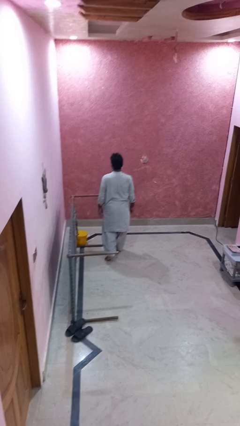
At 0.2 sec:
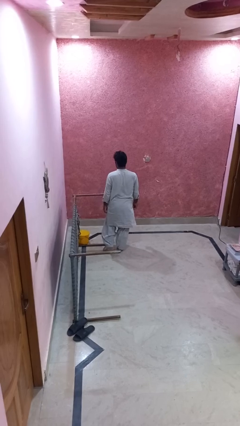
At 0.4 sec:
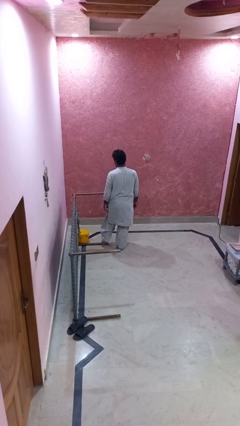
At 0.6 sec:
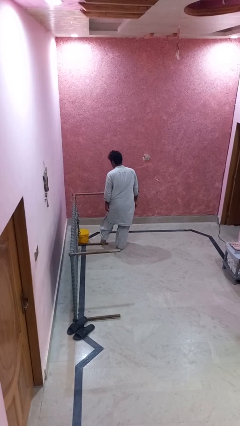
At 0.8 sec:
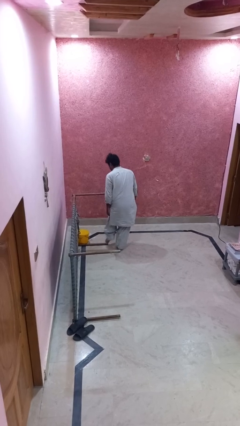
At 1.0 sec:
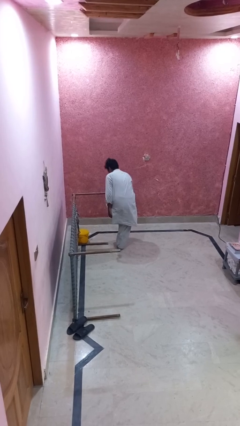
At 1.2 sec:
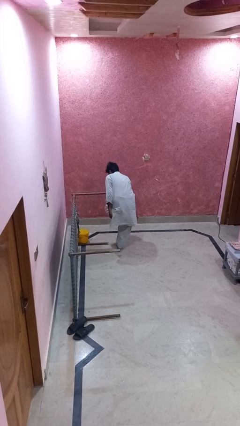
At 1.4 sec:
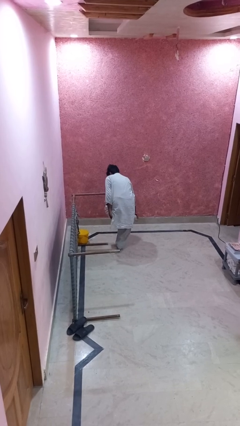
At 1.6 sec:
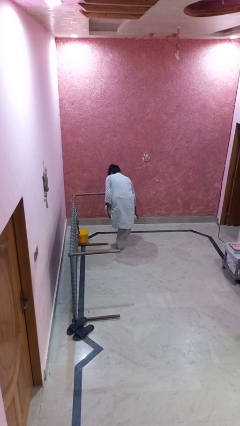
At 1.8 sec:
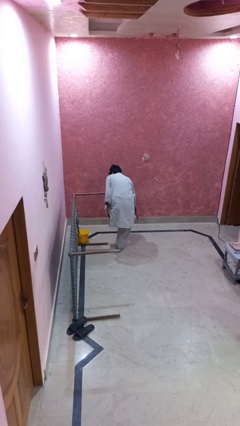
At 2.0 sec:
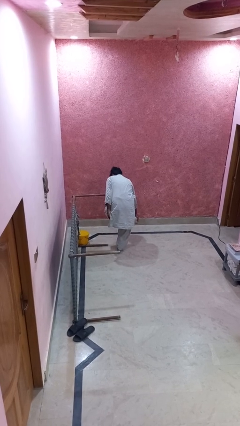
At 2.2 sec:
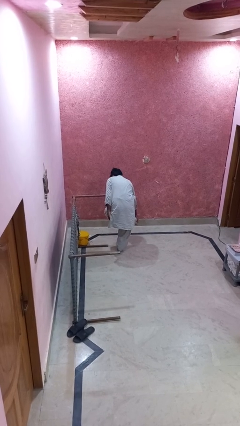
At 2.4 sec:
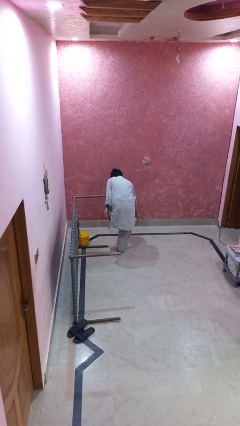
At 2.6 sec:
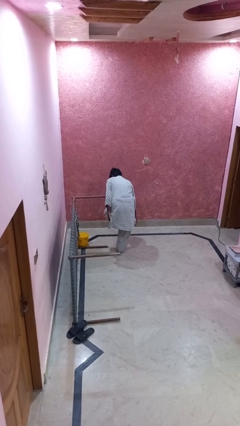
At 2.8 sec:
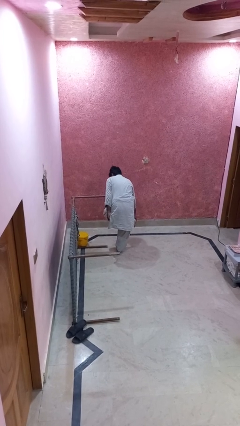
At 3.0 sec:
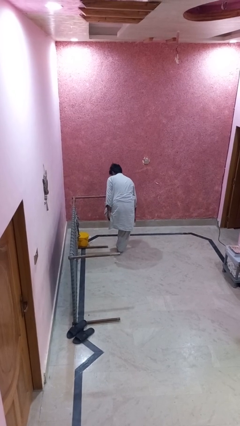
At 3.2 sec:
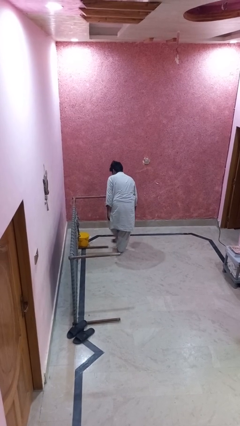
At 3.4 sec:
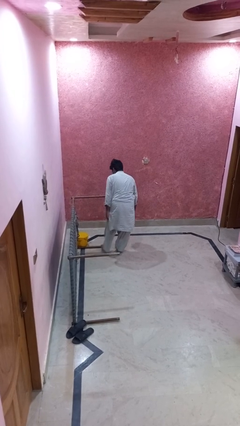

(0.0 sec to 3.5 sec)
person stubs toe

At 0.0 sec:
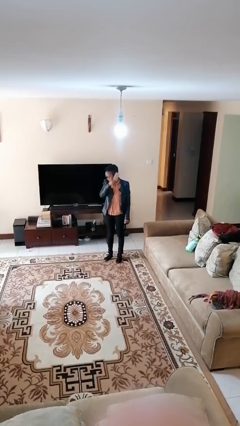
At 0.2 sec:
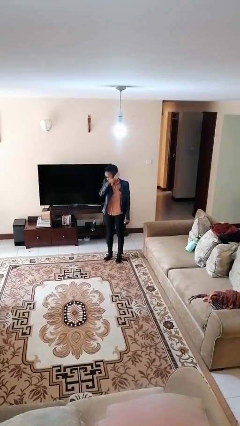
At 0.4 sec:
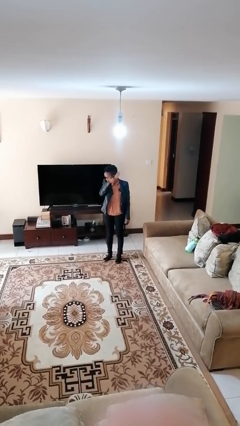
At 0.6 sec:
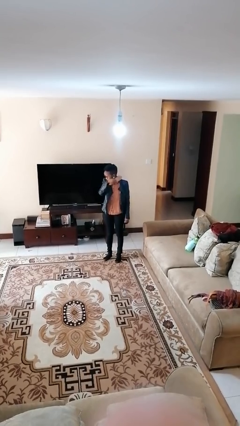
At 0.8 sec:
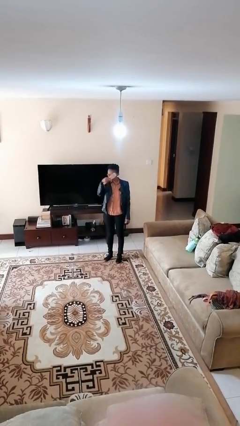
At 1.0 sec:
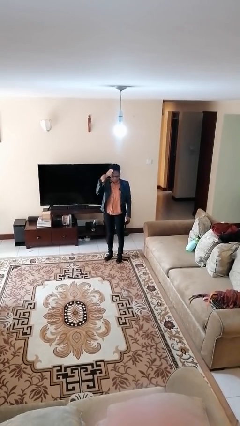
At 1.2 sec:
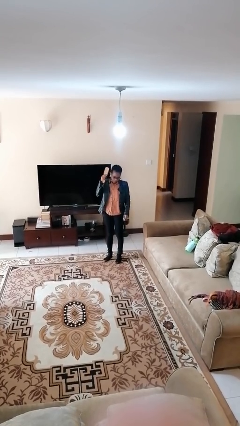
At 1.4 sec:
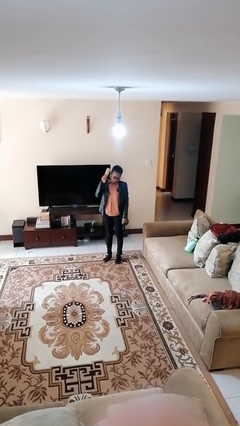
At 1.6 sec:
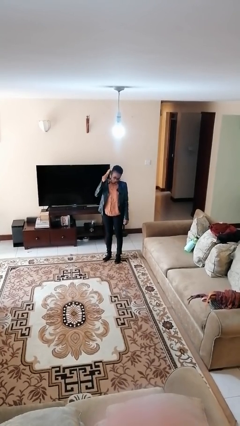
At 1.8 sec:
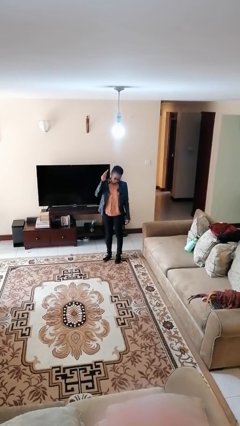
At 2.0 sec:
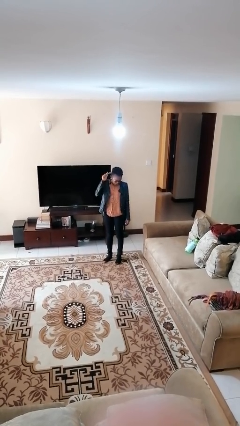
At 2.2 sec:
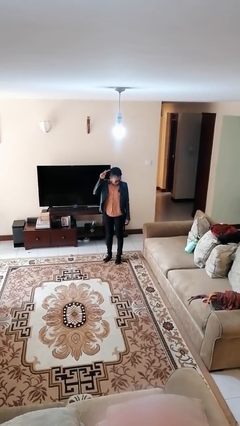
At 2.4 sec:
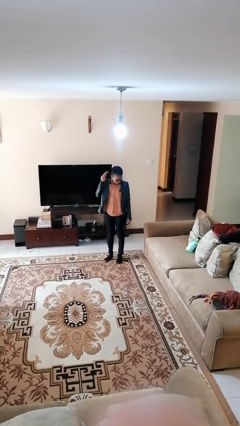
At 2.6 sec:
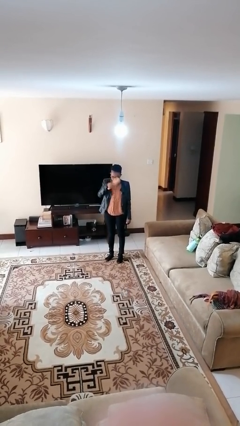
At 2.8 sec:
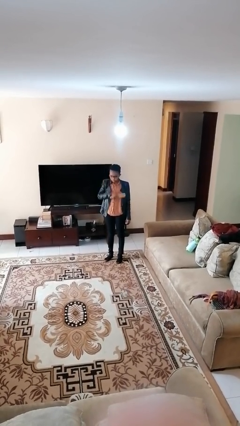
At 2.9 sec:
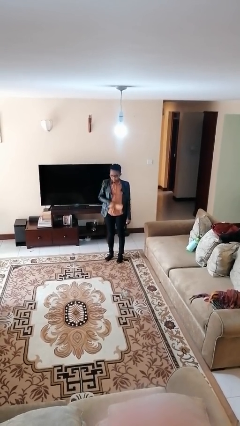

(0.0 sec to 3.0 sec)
person brushes hair

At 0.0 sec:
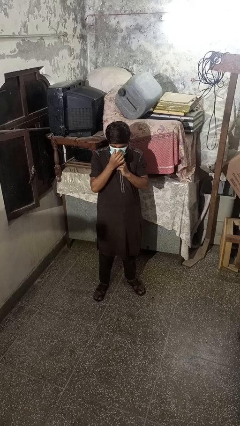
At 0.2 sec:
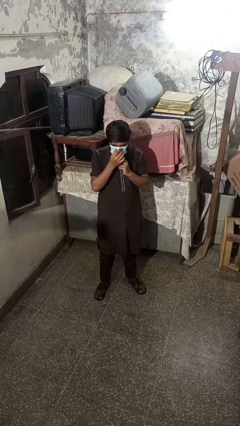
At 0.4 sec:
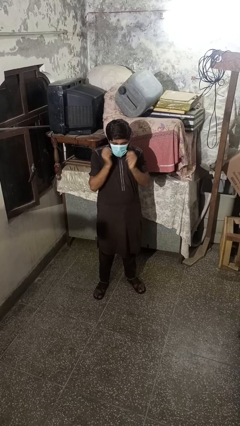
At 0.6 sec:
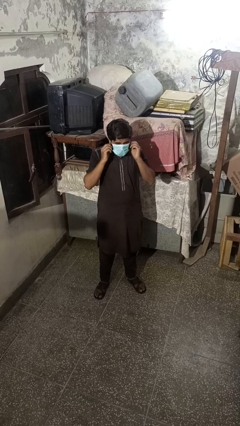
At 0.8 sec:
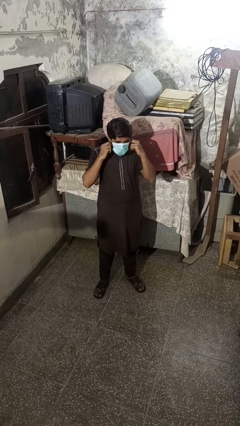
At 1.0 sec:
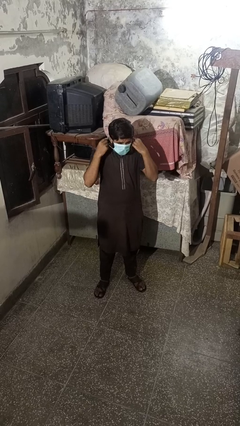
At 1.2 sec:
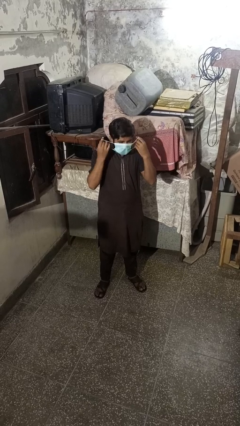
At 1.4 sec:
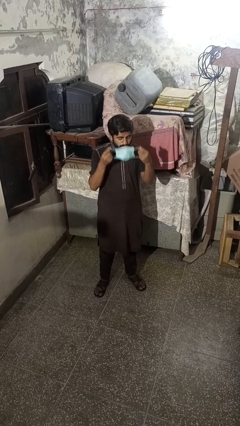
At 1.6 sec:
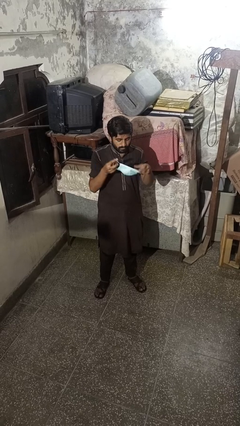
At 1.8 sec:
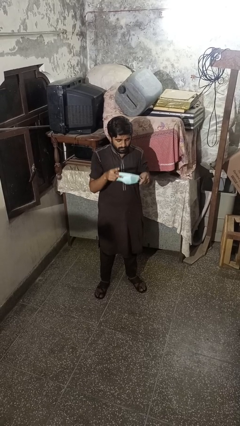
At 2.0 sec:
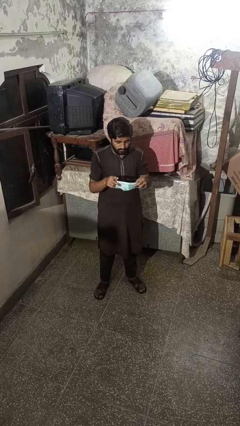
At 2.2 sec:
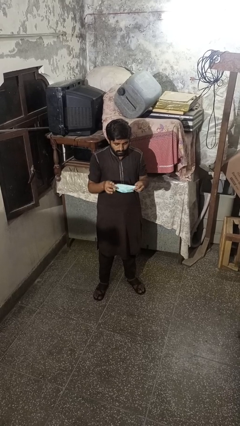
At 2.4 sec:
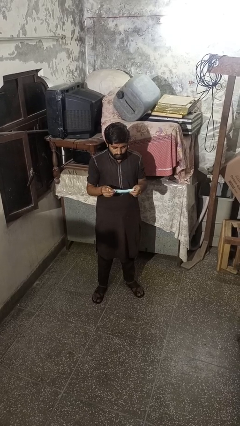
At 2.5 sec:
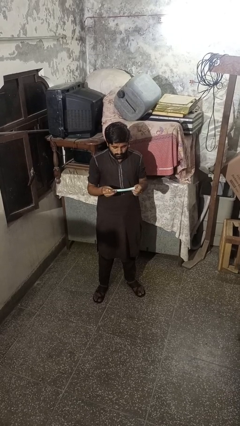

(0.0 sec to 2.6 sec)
person takes off facemask

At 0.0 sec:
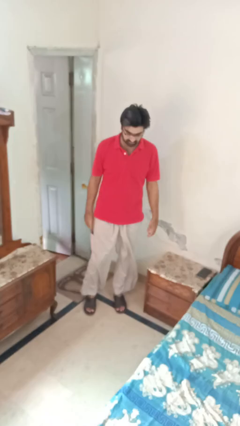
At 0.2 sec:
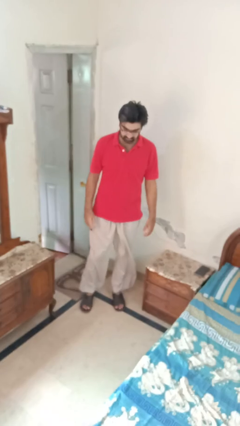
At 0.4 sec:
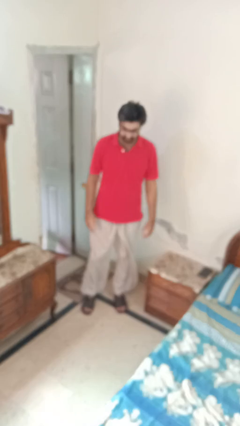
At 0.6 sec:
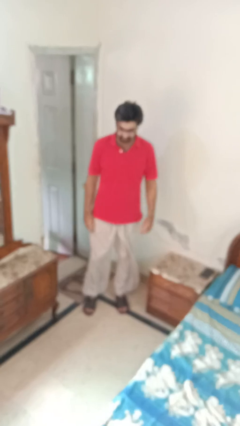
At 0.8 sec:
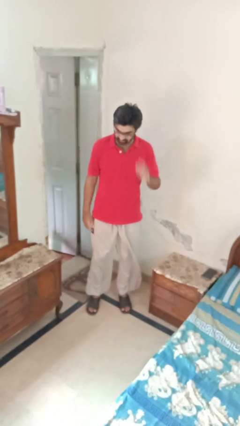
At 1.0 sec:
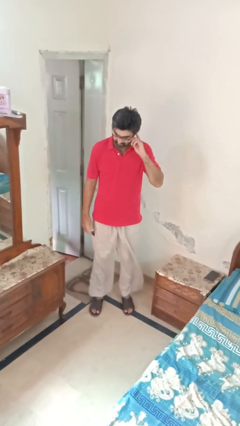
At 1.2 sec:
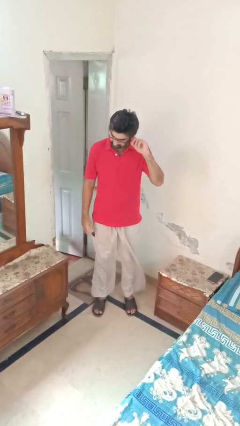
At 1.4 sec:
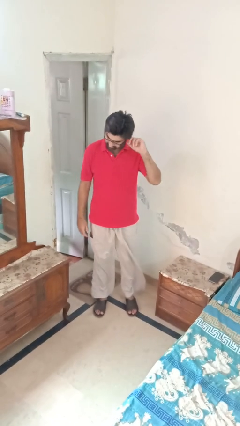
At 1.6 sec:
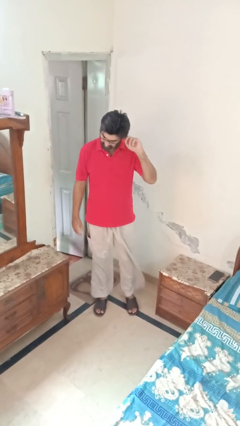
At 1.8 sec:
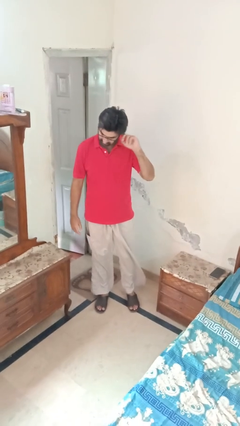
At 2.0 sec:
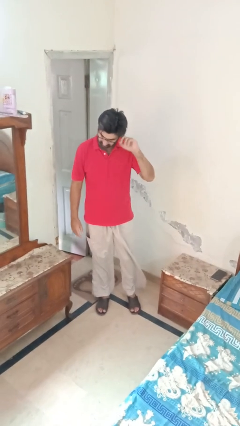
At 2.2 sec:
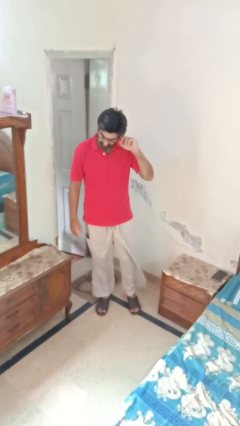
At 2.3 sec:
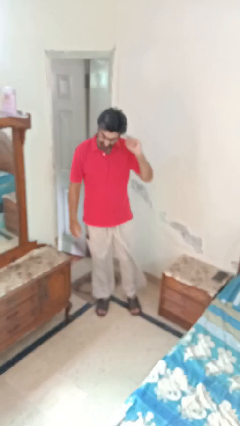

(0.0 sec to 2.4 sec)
person touches earlobe

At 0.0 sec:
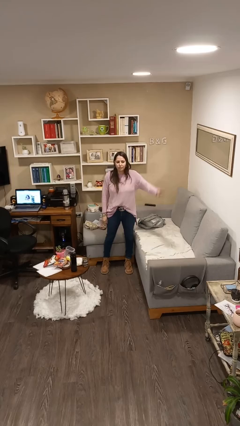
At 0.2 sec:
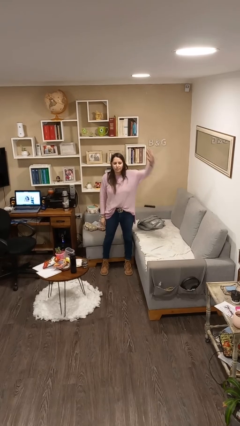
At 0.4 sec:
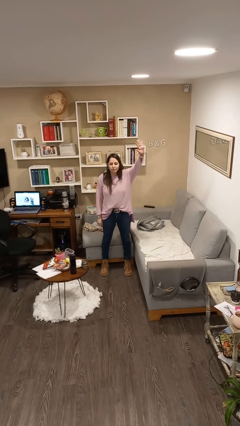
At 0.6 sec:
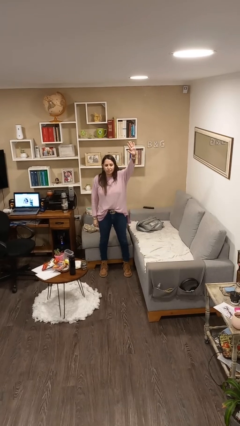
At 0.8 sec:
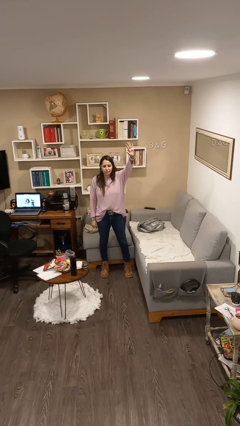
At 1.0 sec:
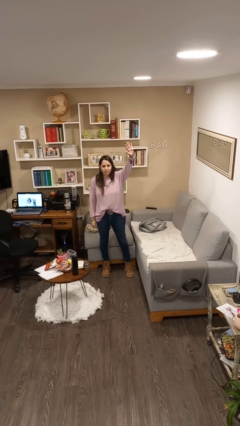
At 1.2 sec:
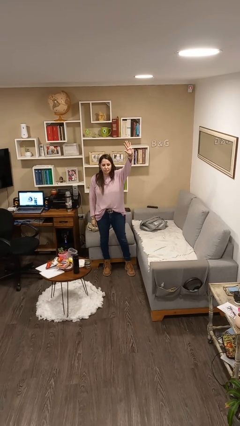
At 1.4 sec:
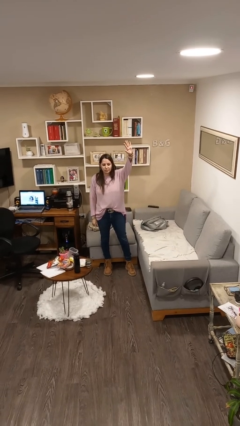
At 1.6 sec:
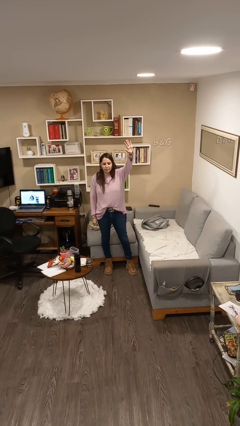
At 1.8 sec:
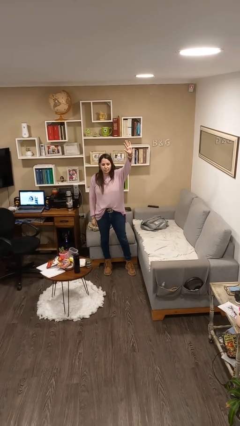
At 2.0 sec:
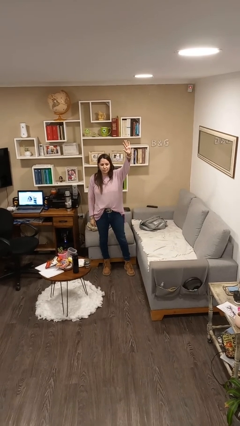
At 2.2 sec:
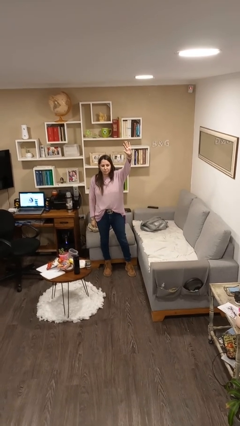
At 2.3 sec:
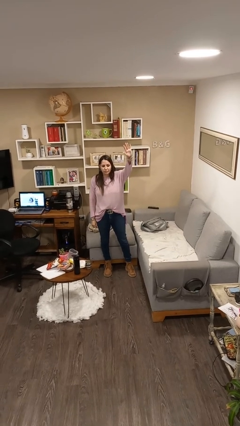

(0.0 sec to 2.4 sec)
person gestures raise hand

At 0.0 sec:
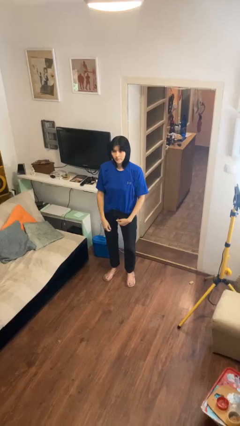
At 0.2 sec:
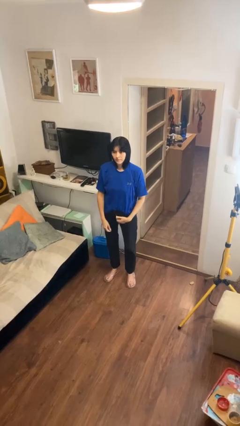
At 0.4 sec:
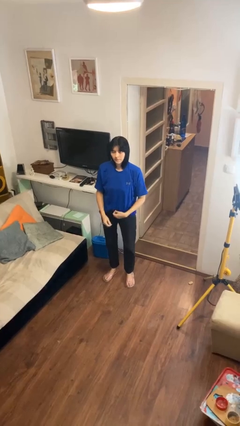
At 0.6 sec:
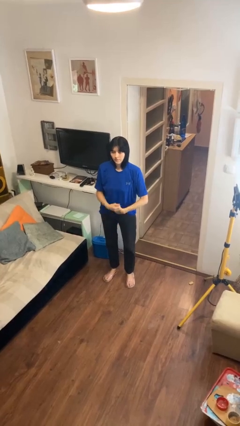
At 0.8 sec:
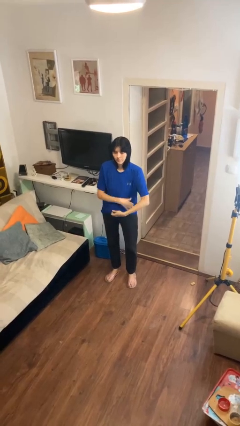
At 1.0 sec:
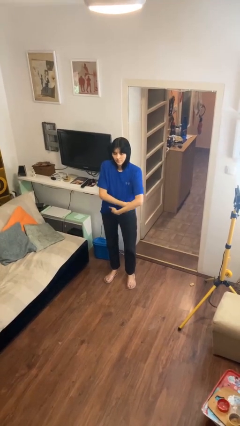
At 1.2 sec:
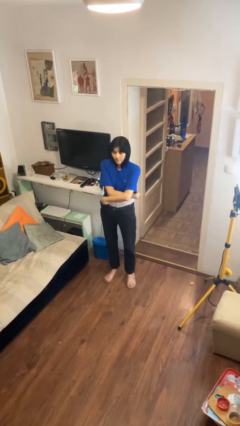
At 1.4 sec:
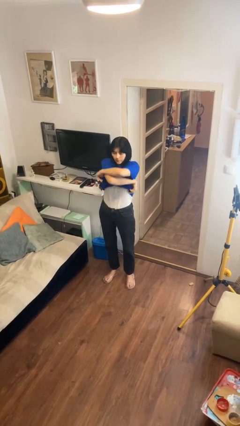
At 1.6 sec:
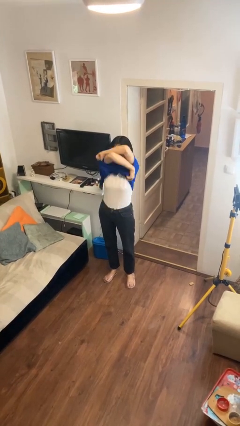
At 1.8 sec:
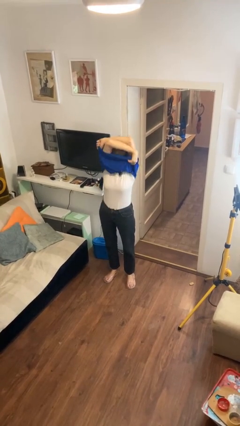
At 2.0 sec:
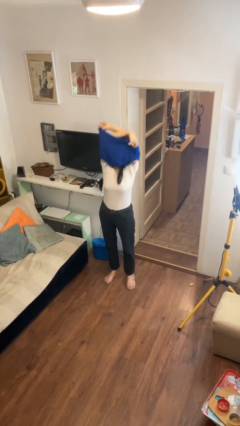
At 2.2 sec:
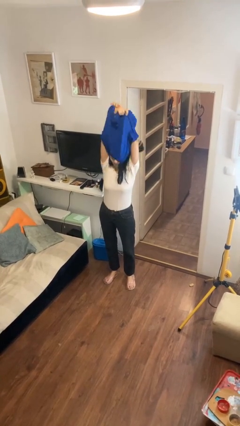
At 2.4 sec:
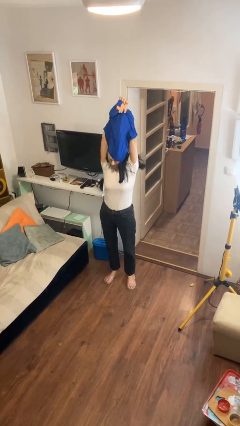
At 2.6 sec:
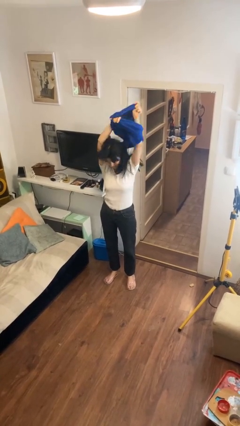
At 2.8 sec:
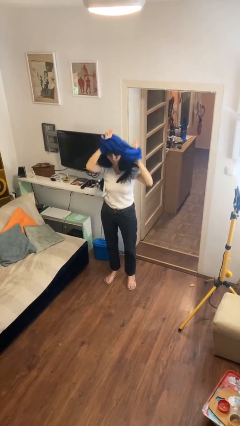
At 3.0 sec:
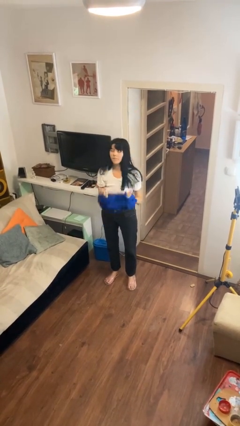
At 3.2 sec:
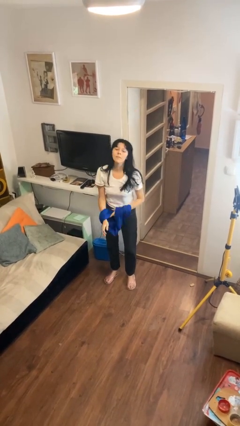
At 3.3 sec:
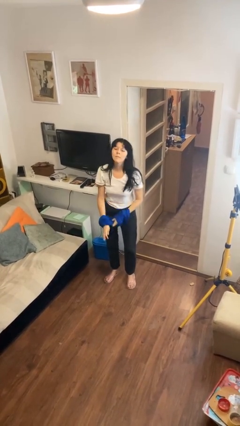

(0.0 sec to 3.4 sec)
person takes off shirt
